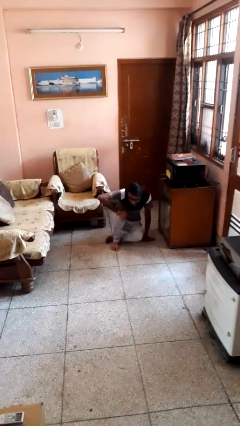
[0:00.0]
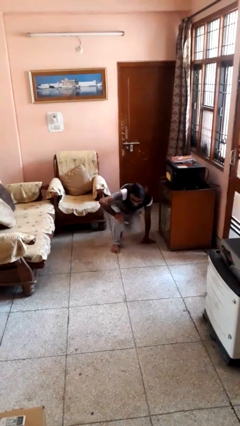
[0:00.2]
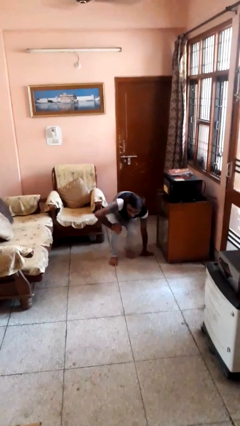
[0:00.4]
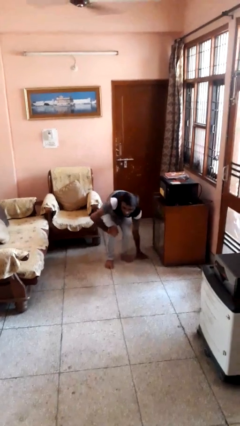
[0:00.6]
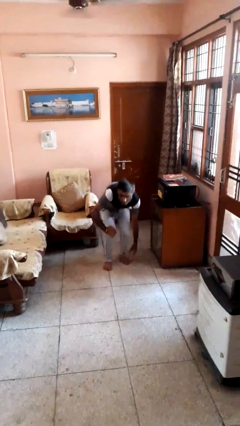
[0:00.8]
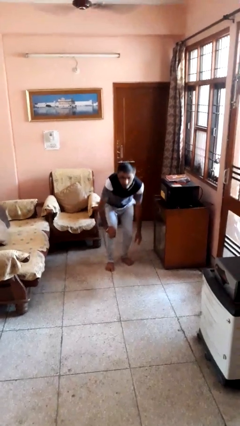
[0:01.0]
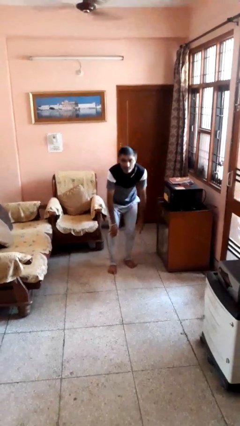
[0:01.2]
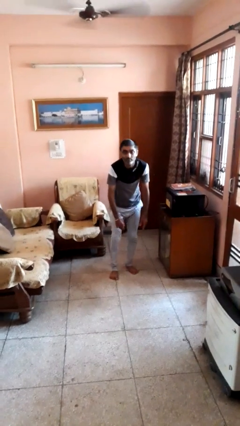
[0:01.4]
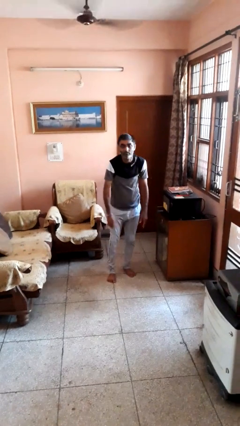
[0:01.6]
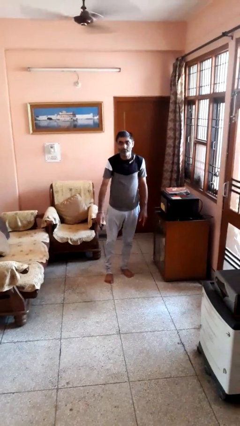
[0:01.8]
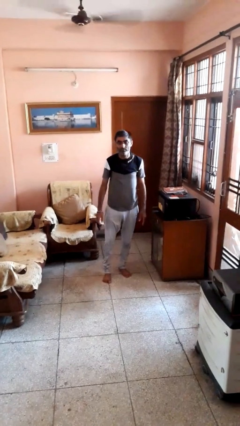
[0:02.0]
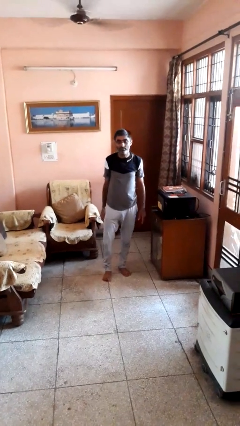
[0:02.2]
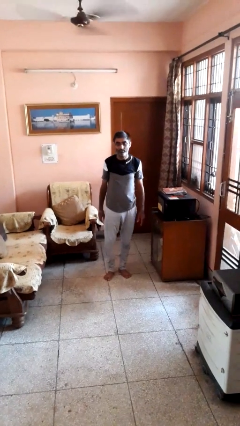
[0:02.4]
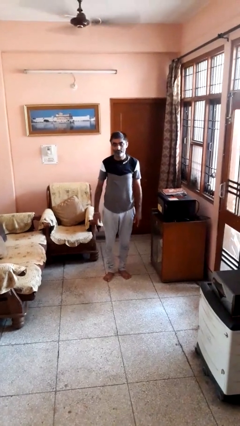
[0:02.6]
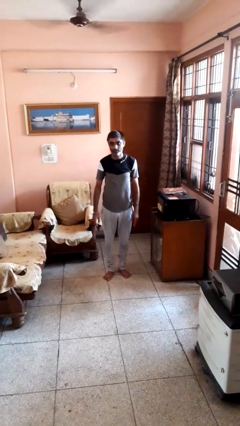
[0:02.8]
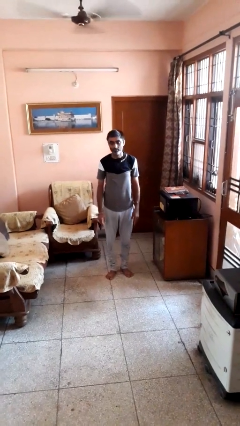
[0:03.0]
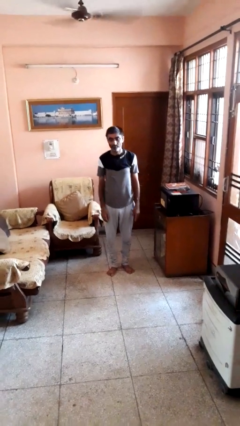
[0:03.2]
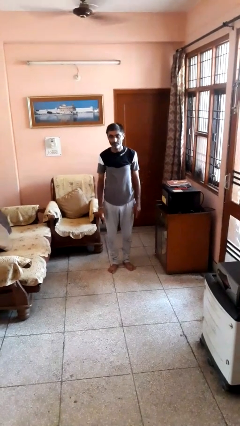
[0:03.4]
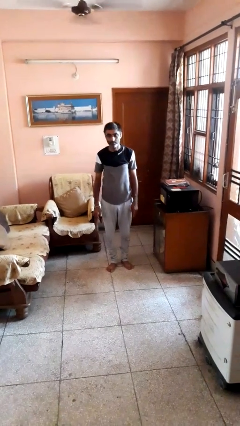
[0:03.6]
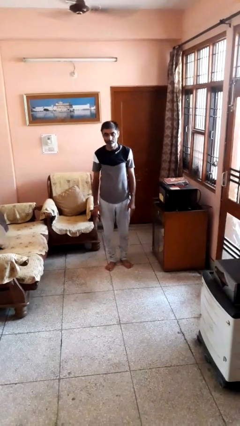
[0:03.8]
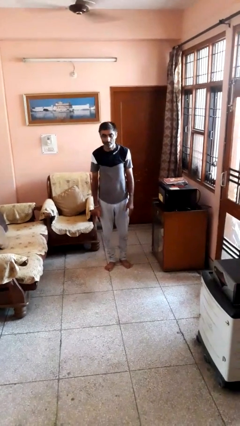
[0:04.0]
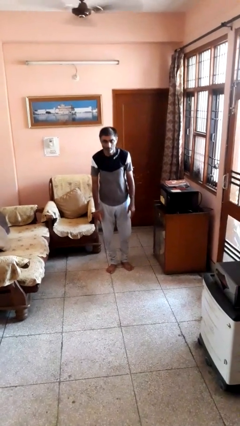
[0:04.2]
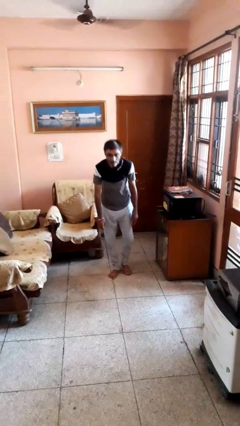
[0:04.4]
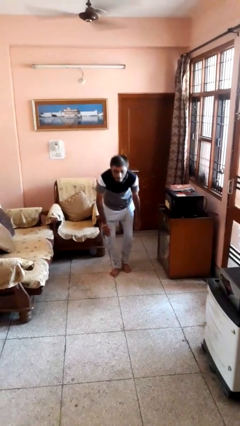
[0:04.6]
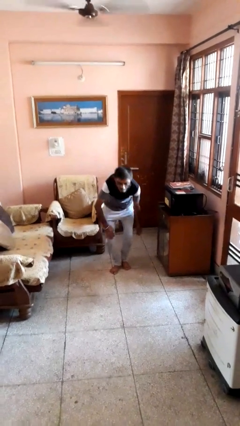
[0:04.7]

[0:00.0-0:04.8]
person stands up from floor

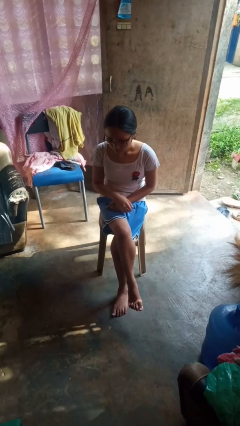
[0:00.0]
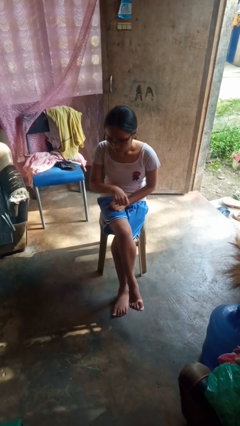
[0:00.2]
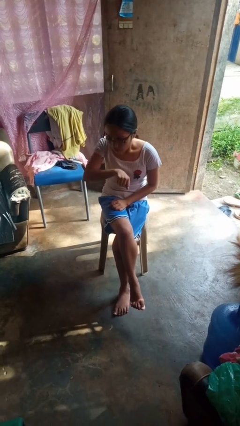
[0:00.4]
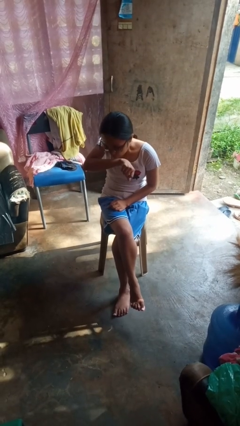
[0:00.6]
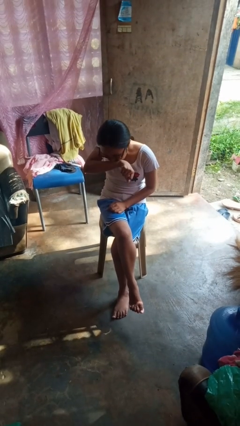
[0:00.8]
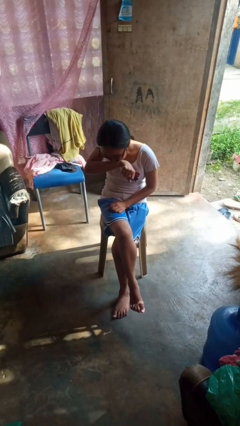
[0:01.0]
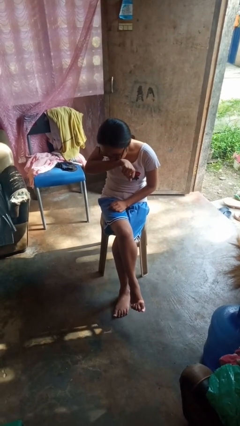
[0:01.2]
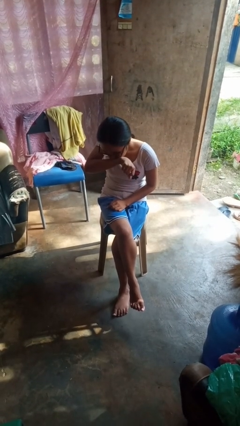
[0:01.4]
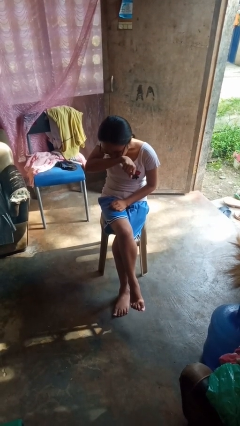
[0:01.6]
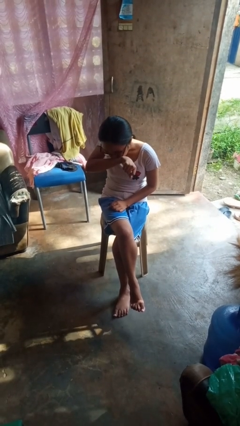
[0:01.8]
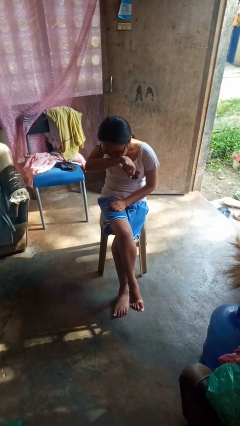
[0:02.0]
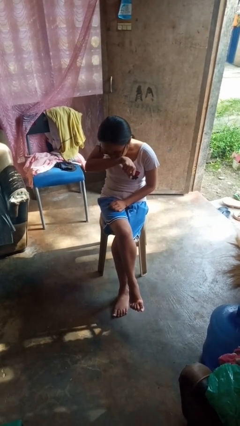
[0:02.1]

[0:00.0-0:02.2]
person sneezes into arm

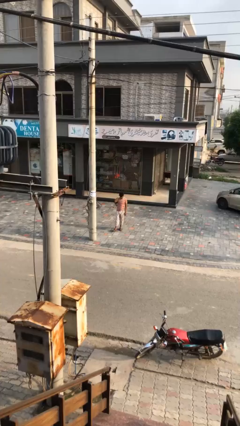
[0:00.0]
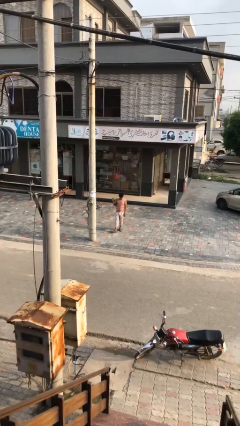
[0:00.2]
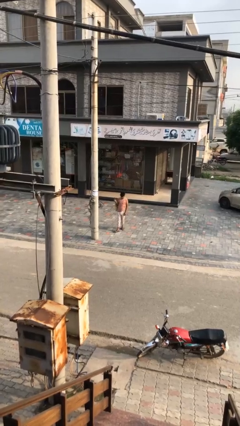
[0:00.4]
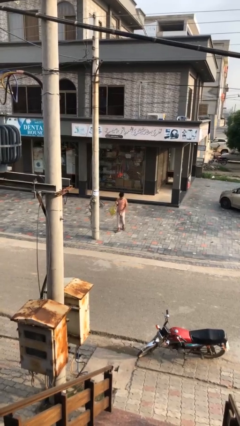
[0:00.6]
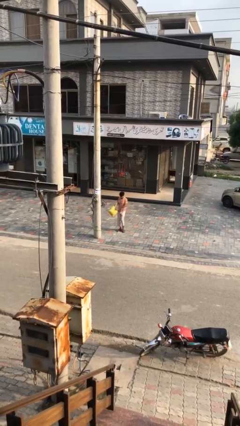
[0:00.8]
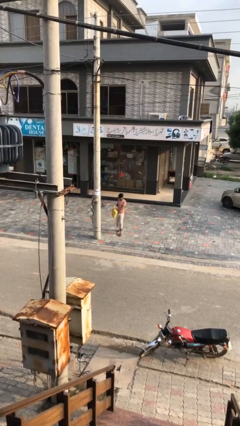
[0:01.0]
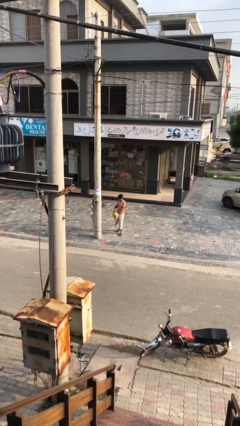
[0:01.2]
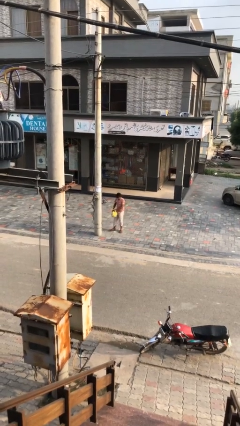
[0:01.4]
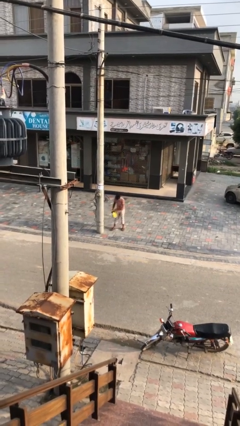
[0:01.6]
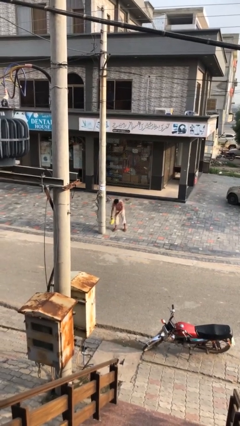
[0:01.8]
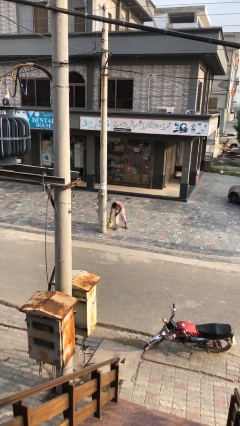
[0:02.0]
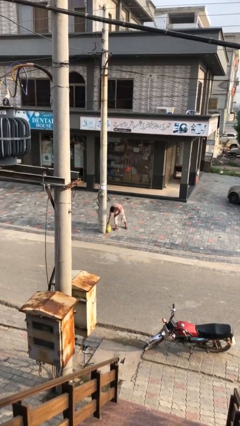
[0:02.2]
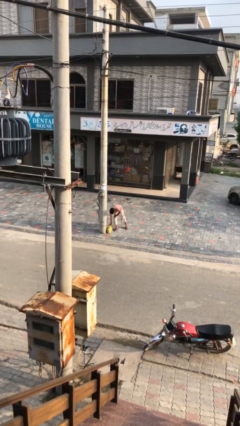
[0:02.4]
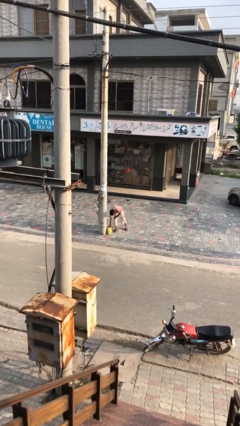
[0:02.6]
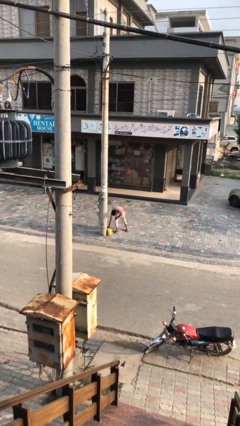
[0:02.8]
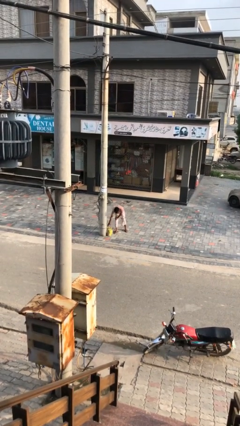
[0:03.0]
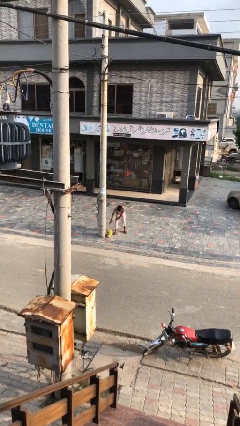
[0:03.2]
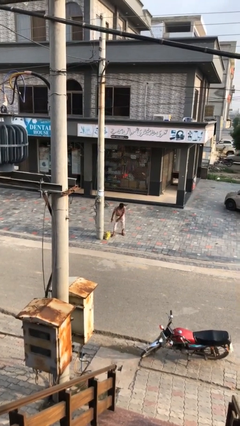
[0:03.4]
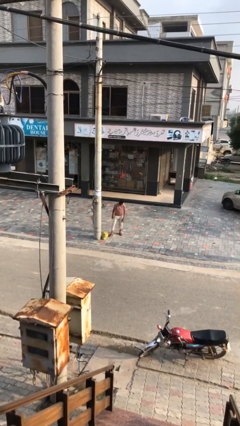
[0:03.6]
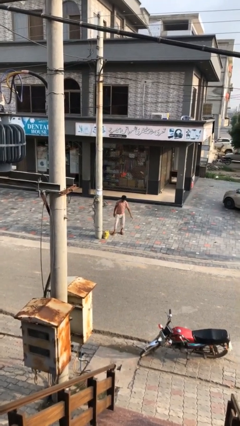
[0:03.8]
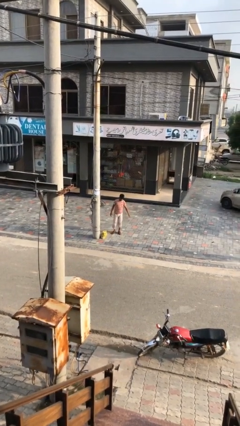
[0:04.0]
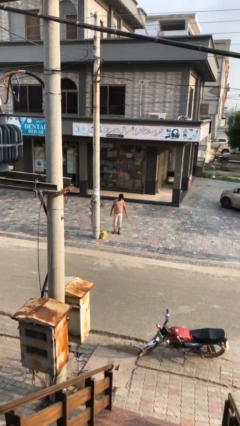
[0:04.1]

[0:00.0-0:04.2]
person puts down object on floor

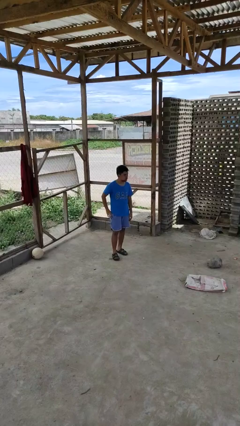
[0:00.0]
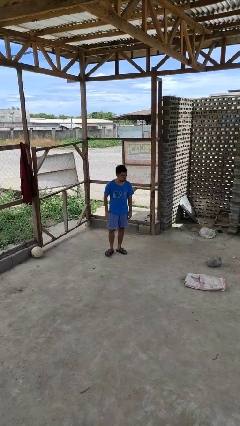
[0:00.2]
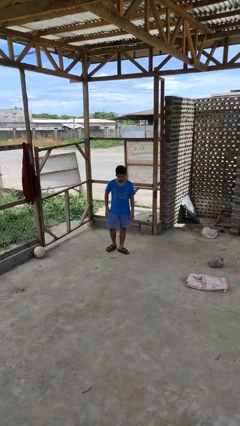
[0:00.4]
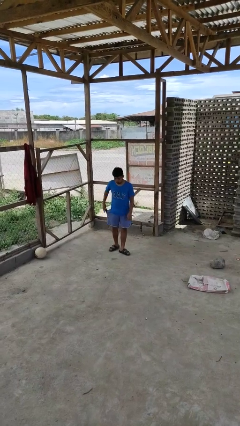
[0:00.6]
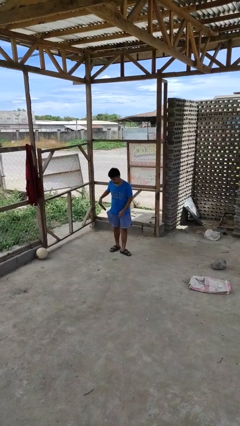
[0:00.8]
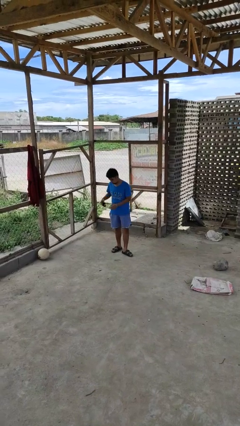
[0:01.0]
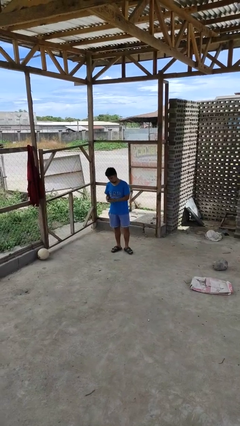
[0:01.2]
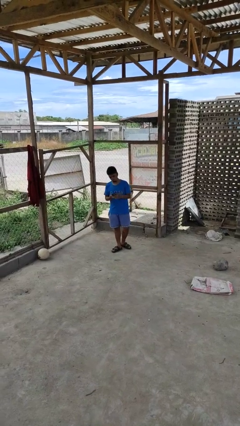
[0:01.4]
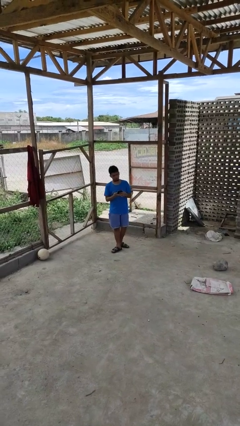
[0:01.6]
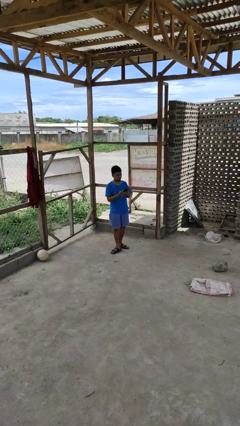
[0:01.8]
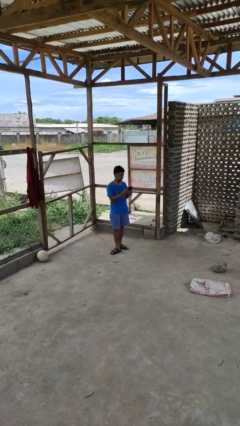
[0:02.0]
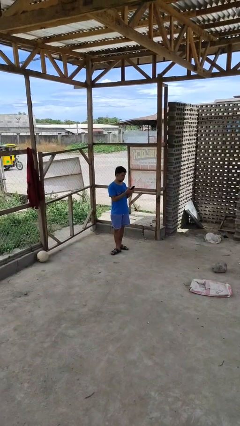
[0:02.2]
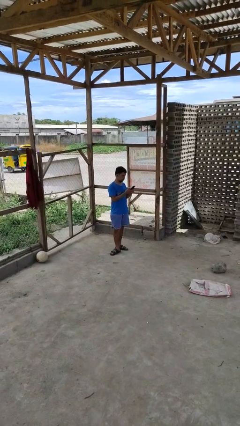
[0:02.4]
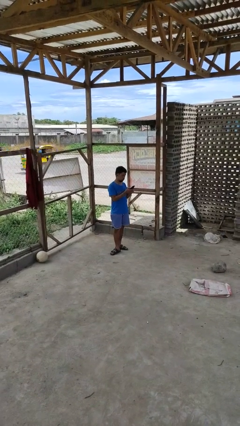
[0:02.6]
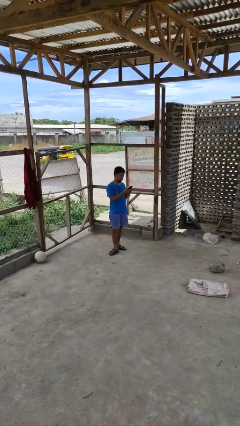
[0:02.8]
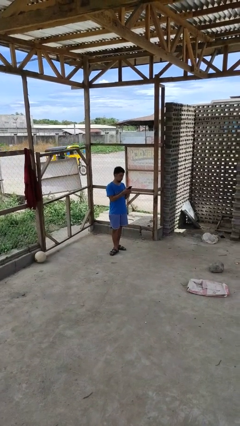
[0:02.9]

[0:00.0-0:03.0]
person takes phone from pocket

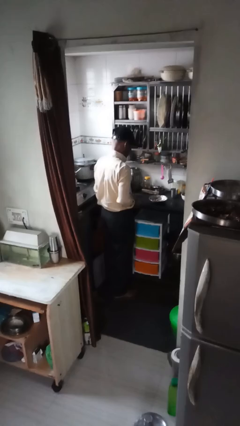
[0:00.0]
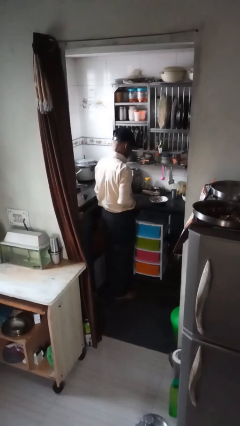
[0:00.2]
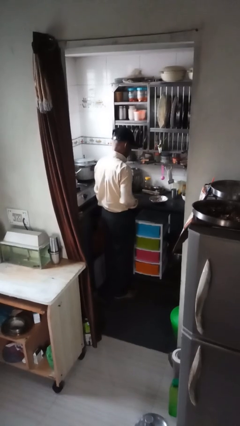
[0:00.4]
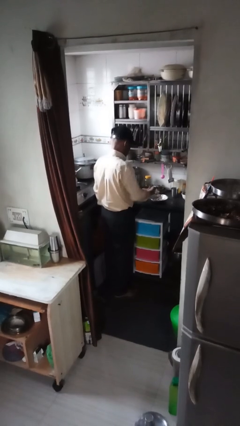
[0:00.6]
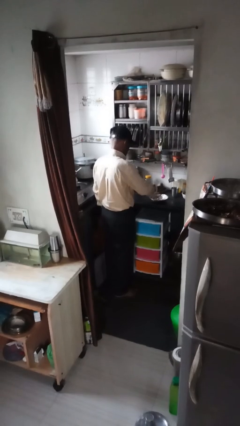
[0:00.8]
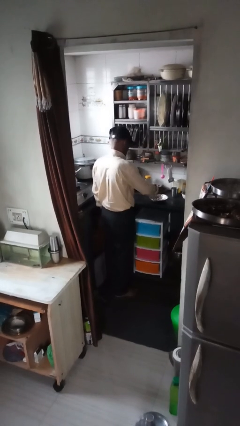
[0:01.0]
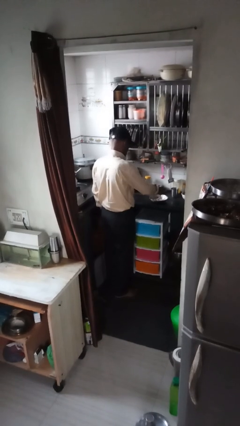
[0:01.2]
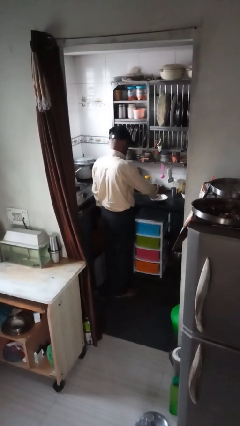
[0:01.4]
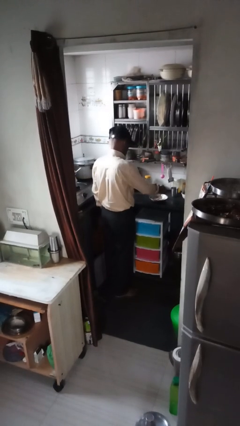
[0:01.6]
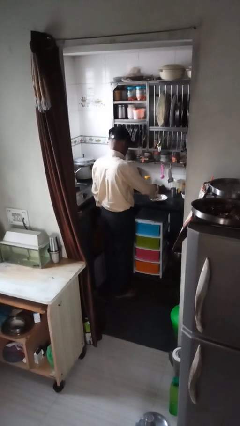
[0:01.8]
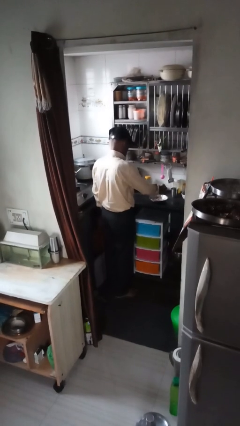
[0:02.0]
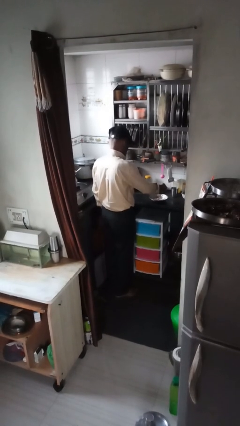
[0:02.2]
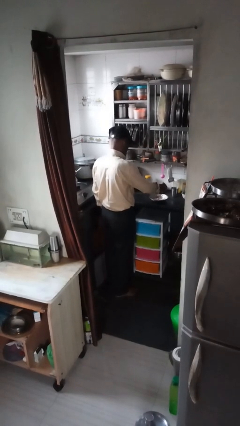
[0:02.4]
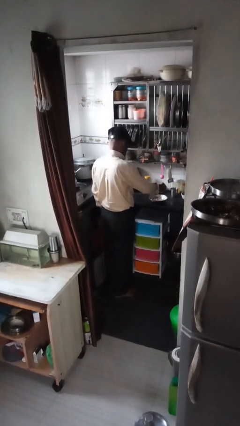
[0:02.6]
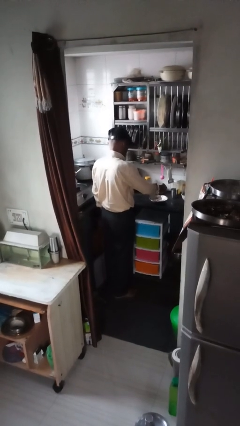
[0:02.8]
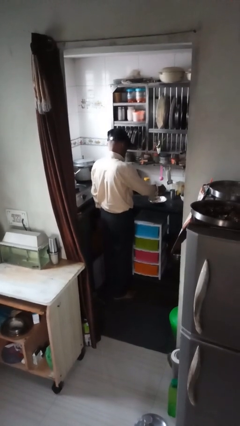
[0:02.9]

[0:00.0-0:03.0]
person pours into bowl
